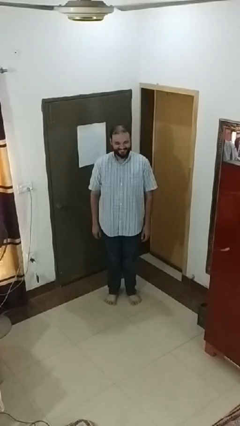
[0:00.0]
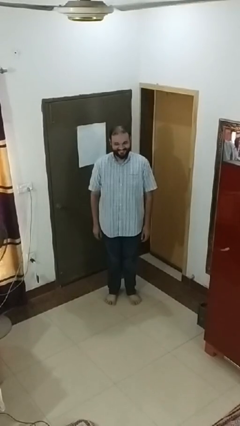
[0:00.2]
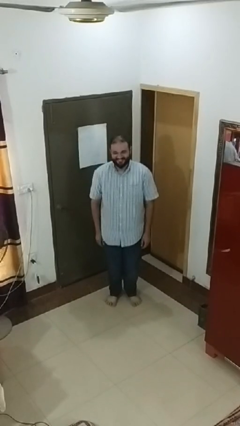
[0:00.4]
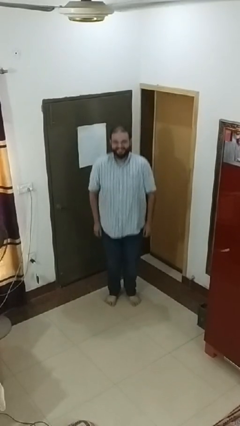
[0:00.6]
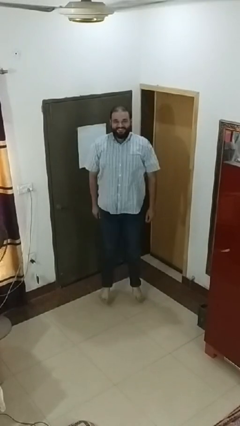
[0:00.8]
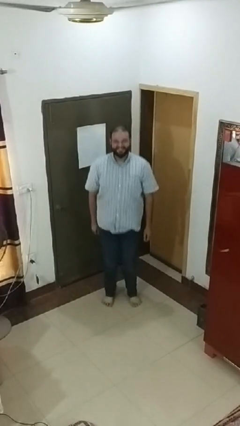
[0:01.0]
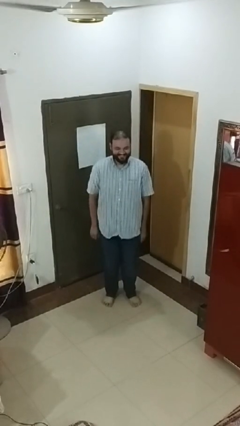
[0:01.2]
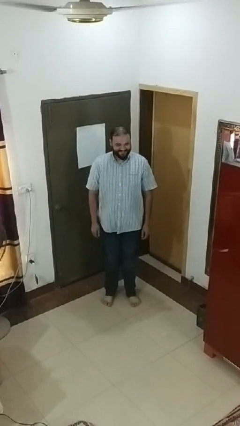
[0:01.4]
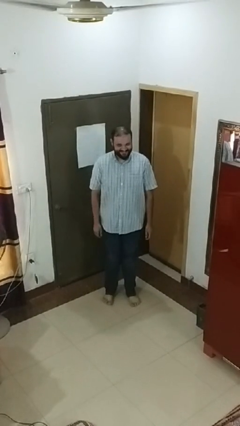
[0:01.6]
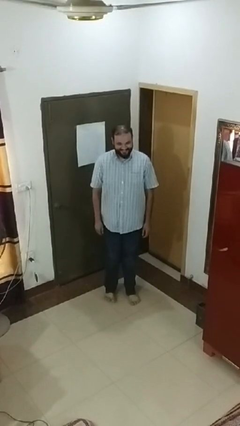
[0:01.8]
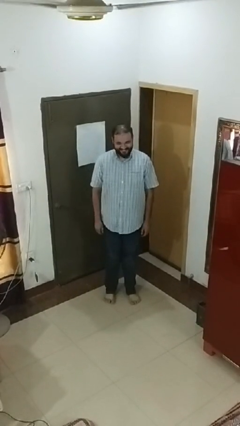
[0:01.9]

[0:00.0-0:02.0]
person jumps

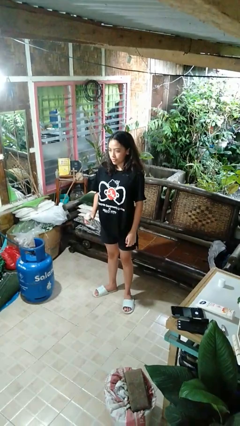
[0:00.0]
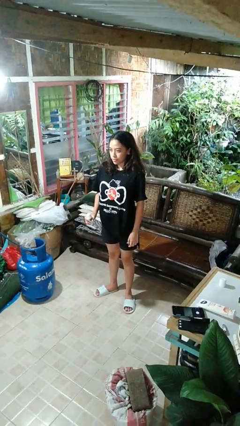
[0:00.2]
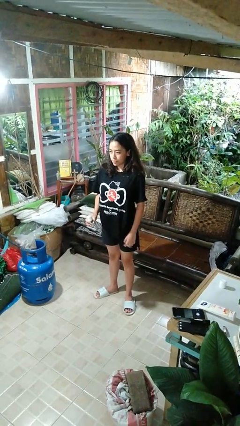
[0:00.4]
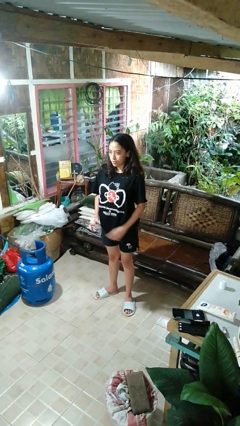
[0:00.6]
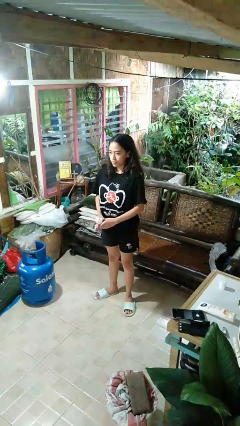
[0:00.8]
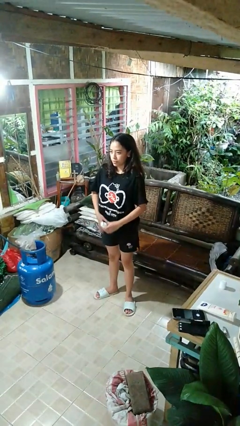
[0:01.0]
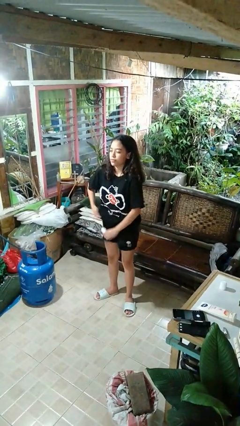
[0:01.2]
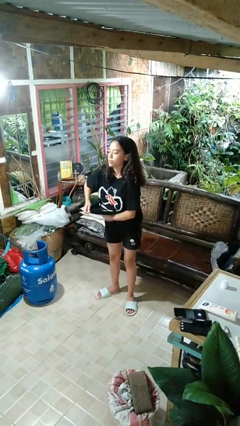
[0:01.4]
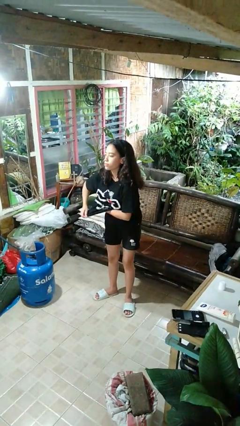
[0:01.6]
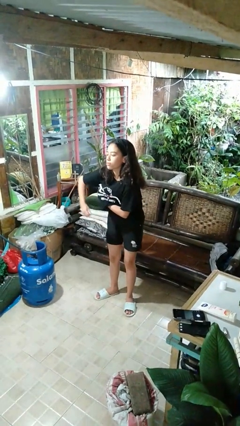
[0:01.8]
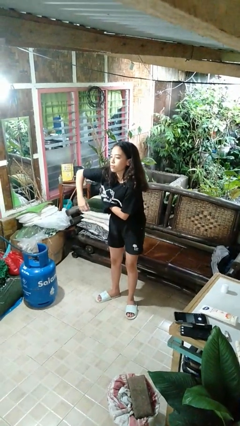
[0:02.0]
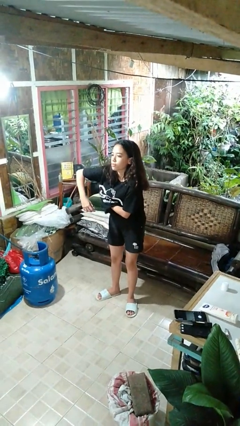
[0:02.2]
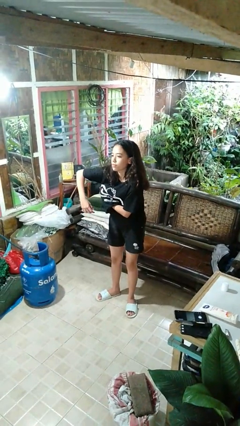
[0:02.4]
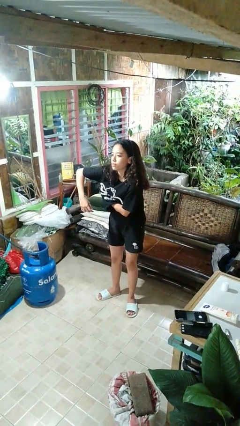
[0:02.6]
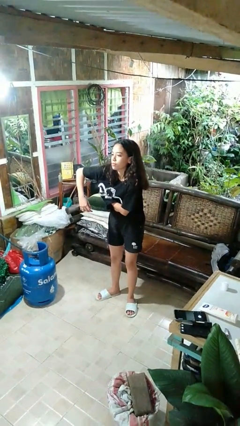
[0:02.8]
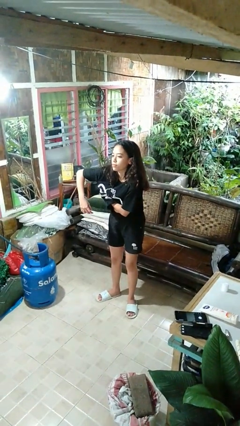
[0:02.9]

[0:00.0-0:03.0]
person applies deodorant

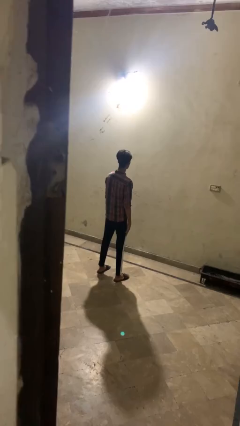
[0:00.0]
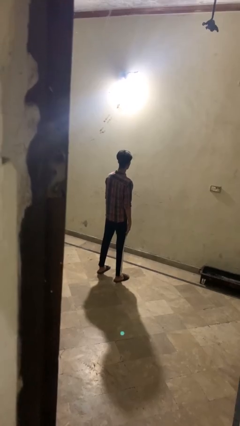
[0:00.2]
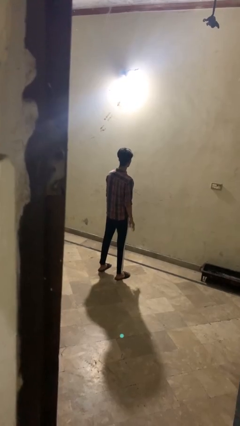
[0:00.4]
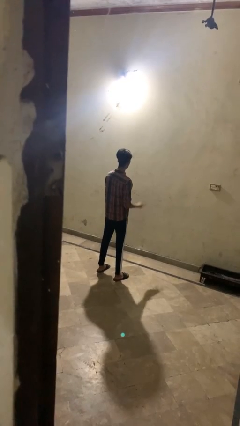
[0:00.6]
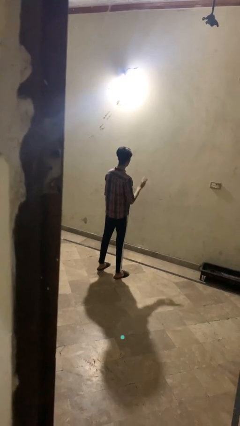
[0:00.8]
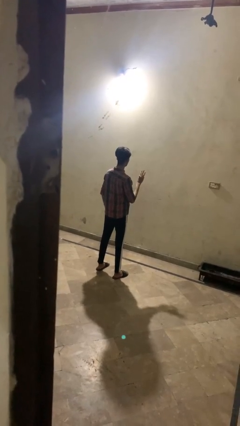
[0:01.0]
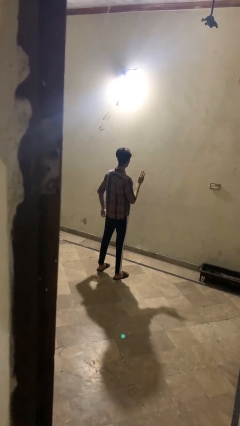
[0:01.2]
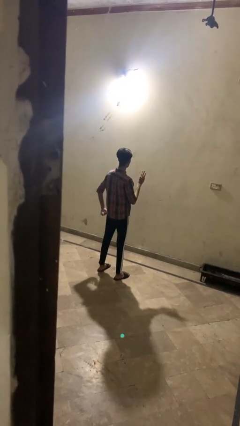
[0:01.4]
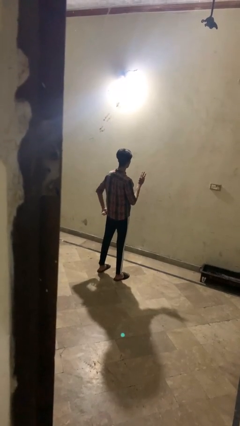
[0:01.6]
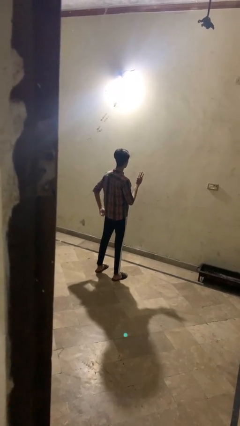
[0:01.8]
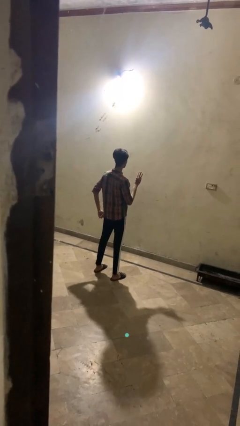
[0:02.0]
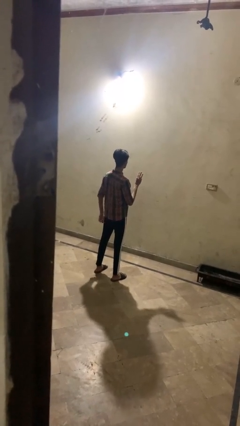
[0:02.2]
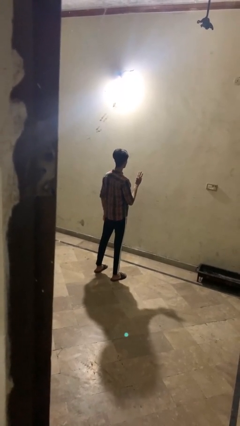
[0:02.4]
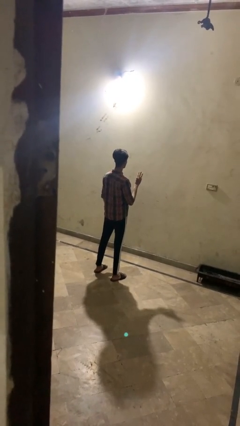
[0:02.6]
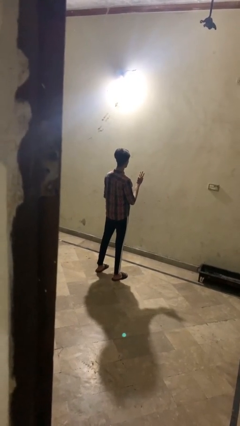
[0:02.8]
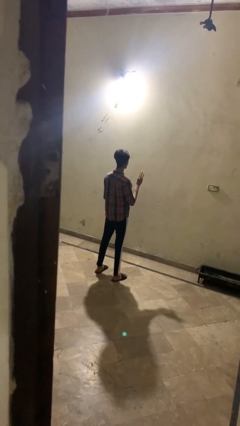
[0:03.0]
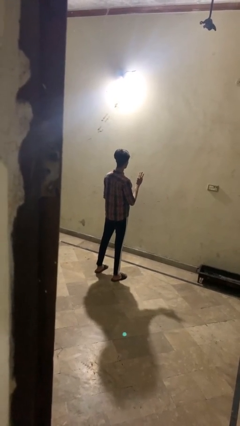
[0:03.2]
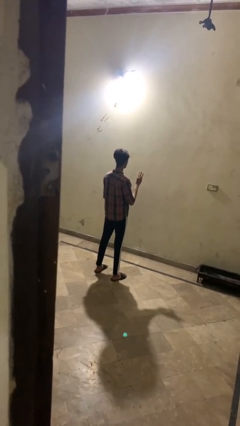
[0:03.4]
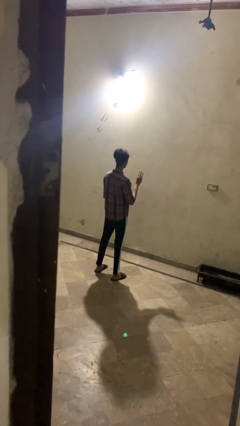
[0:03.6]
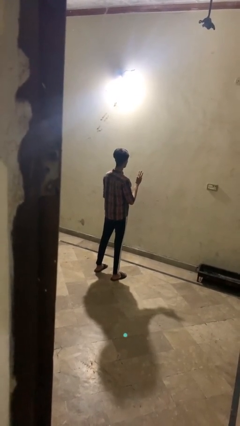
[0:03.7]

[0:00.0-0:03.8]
person gestures number three

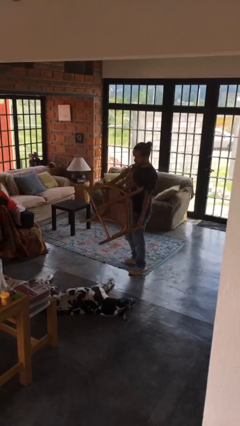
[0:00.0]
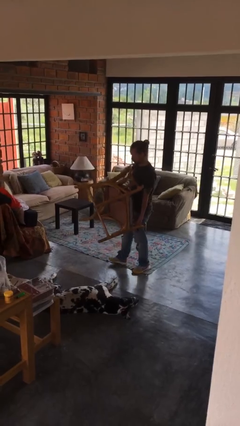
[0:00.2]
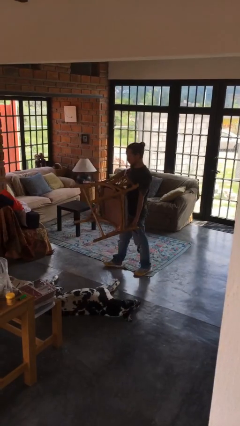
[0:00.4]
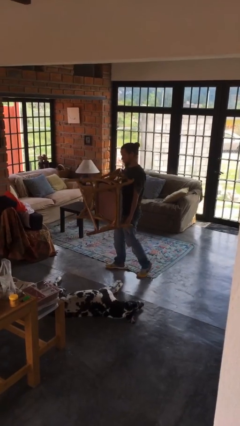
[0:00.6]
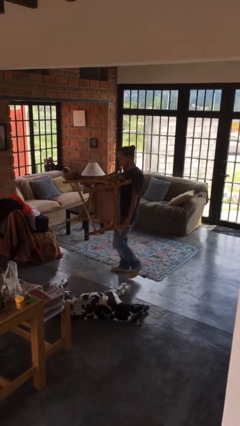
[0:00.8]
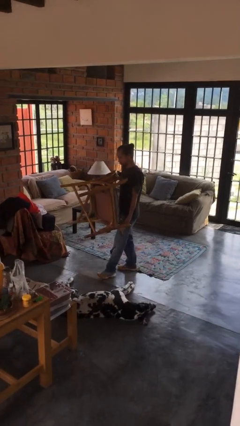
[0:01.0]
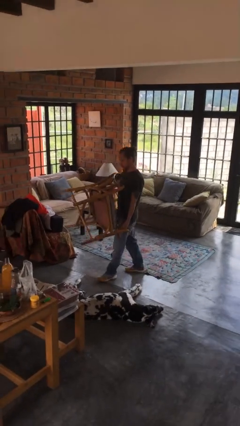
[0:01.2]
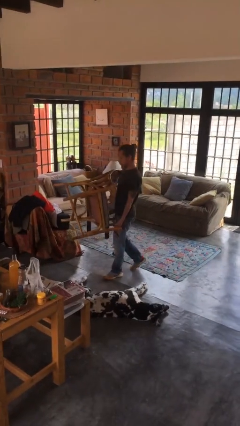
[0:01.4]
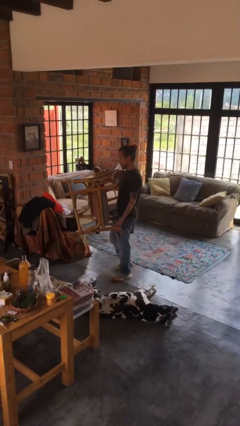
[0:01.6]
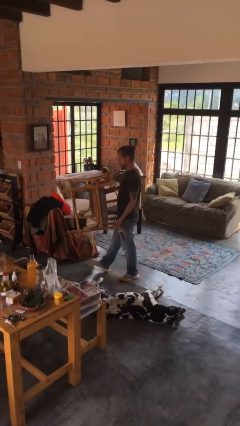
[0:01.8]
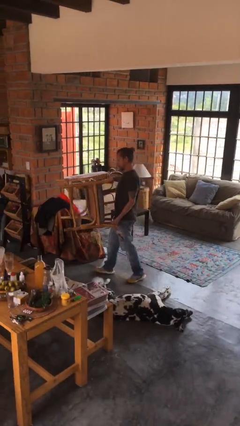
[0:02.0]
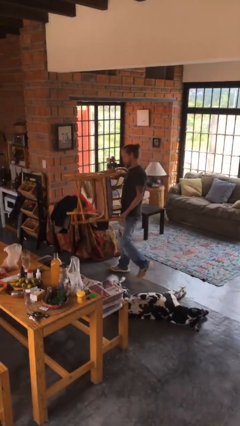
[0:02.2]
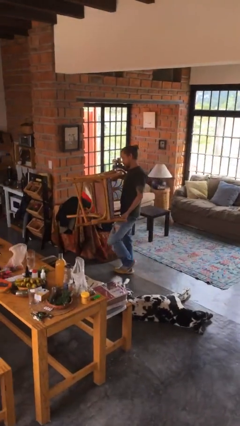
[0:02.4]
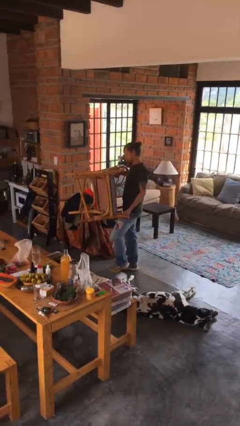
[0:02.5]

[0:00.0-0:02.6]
person carries furniture

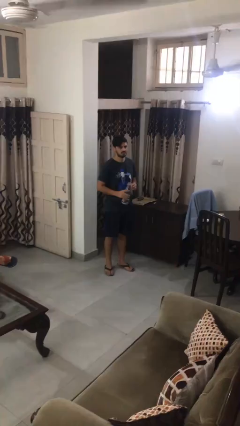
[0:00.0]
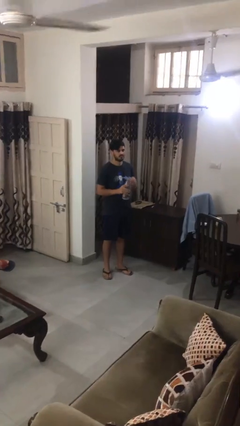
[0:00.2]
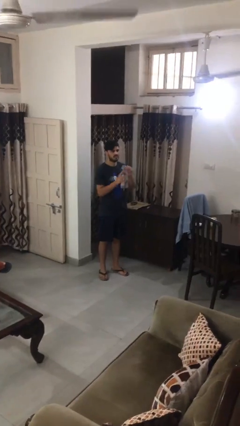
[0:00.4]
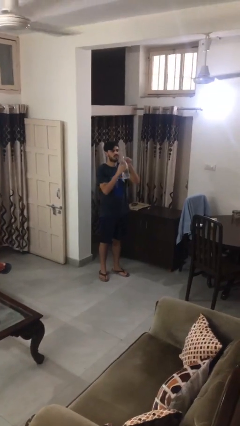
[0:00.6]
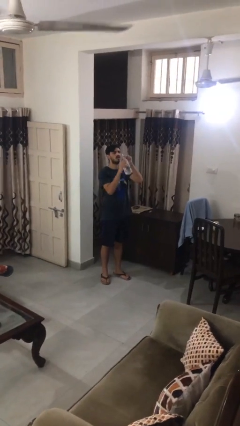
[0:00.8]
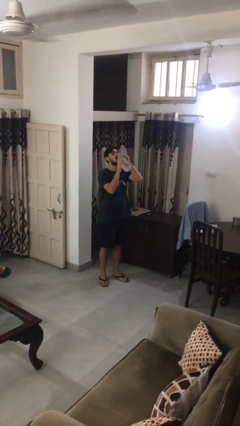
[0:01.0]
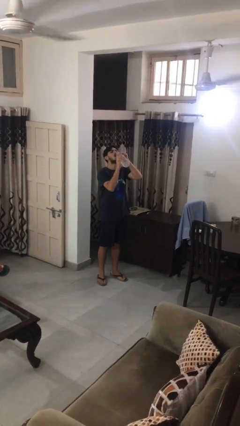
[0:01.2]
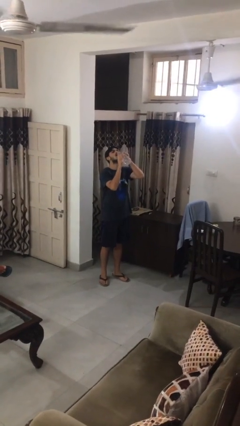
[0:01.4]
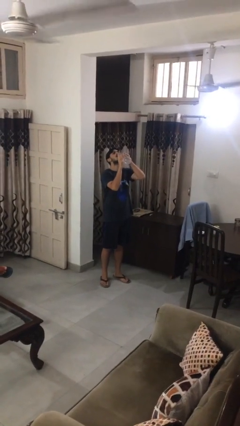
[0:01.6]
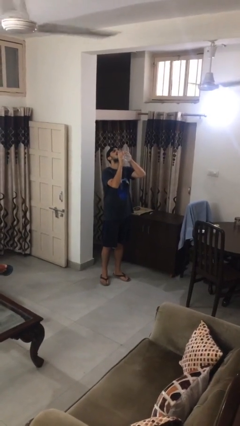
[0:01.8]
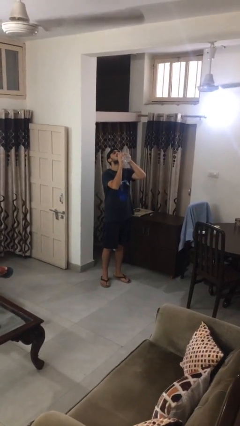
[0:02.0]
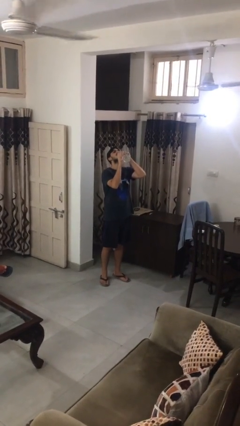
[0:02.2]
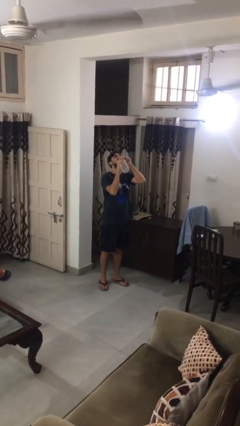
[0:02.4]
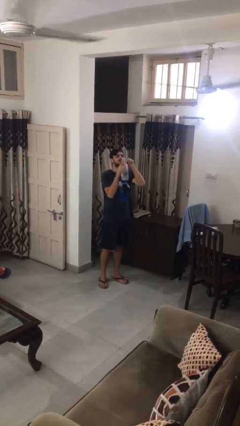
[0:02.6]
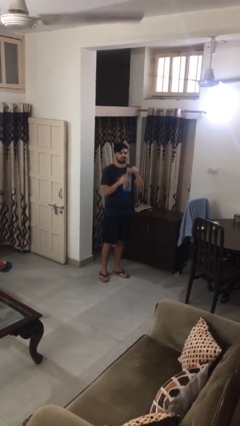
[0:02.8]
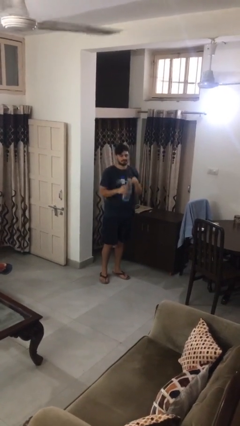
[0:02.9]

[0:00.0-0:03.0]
person drinks from bottle

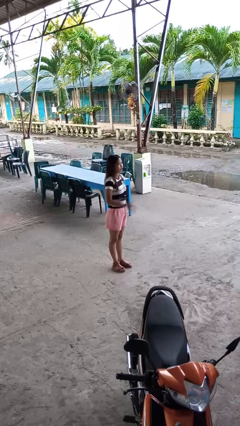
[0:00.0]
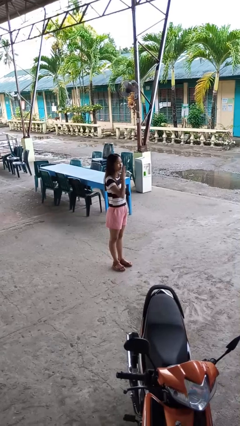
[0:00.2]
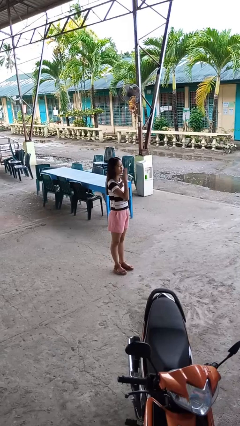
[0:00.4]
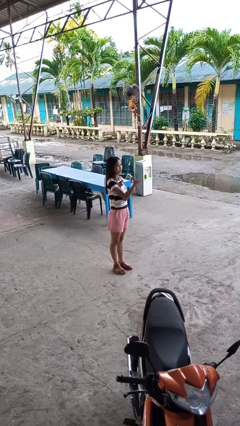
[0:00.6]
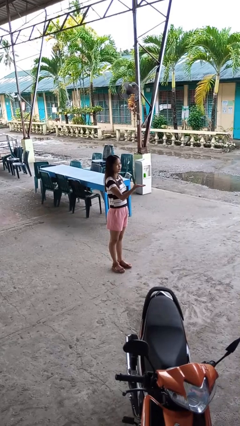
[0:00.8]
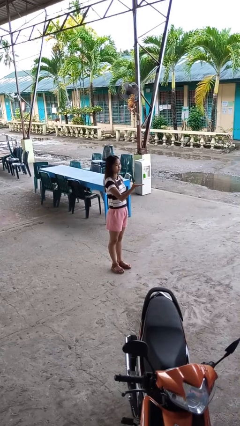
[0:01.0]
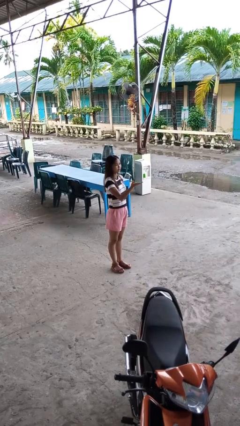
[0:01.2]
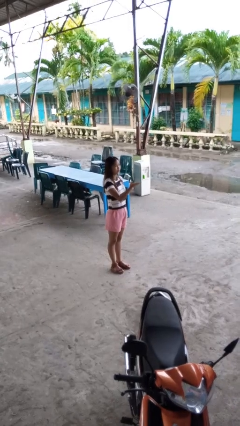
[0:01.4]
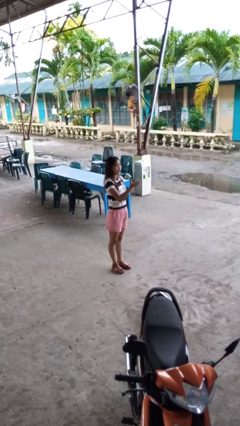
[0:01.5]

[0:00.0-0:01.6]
person gestures blow kiss

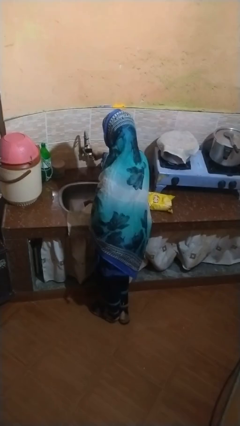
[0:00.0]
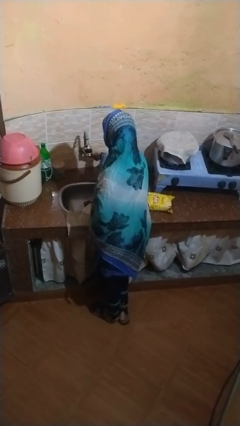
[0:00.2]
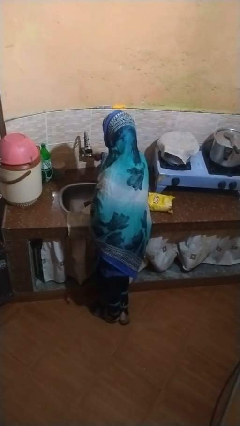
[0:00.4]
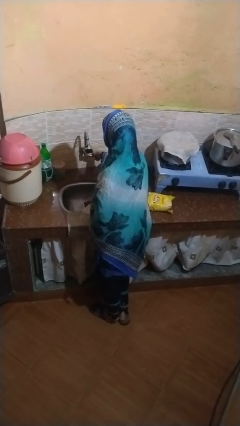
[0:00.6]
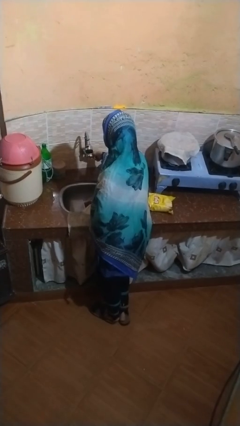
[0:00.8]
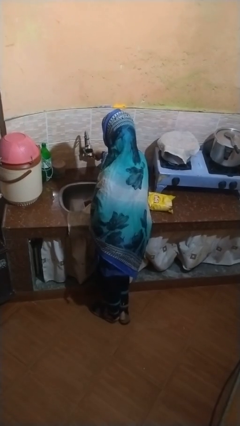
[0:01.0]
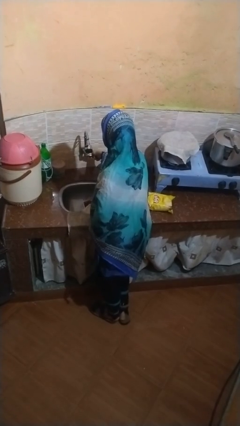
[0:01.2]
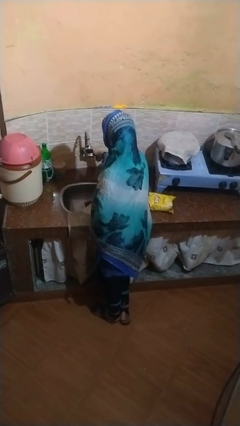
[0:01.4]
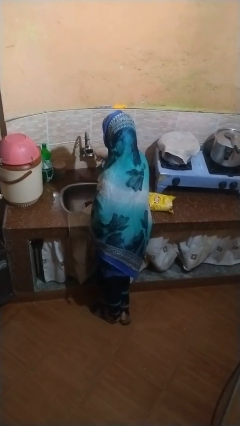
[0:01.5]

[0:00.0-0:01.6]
person turns off faucet
